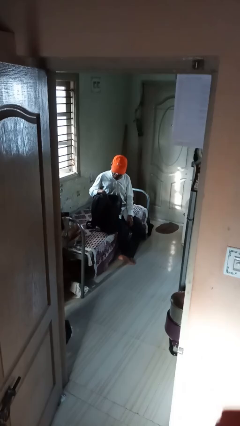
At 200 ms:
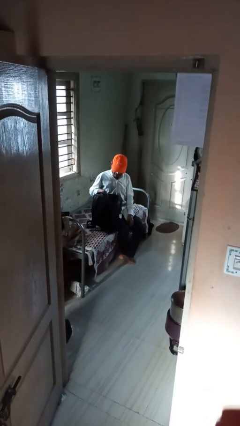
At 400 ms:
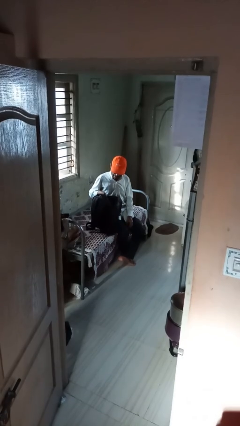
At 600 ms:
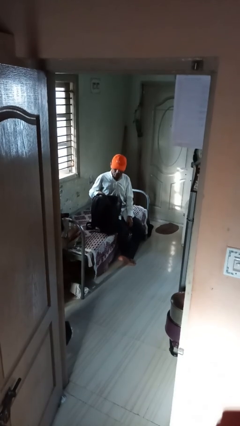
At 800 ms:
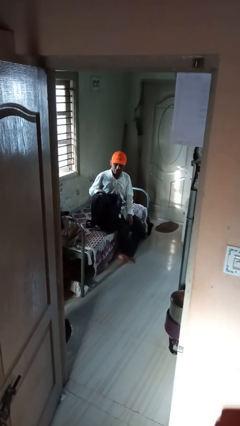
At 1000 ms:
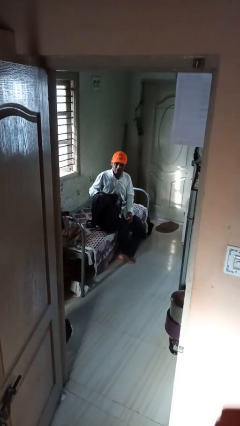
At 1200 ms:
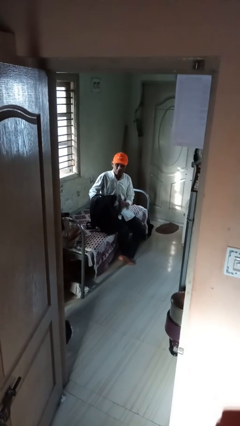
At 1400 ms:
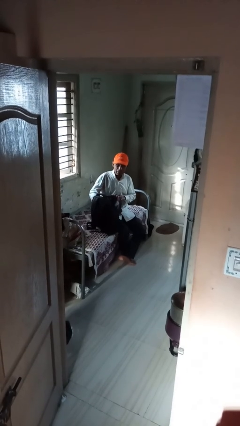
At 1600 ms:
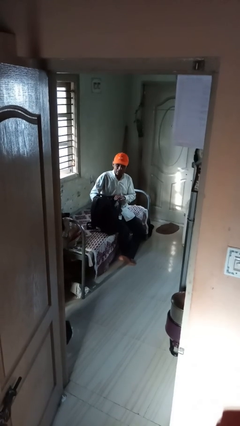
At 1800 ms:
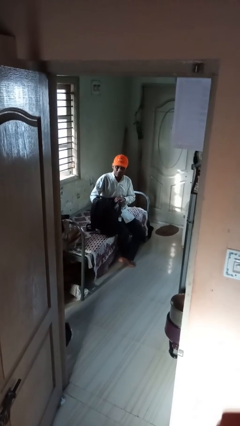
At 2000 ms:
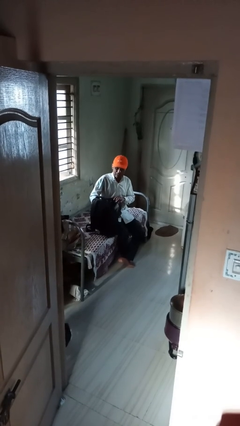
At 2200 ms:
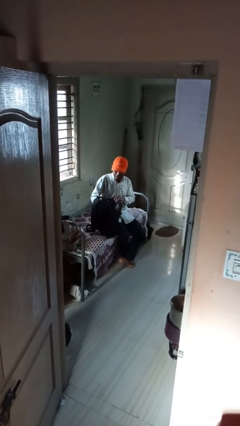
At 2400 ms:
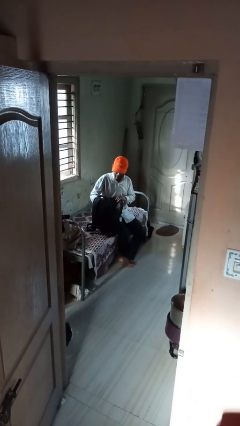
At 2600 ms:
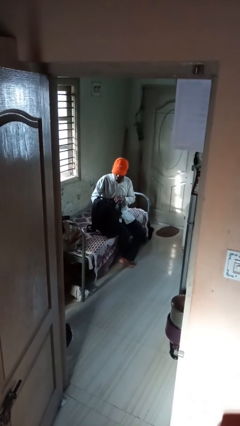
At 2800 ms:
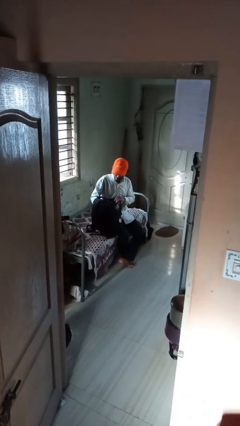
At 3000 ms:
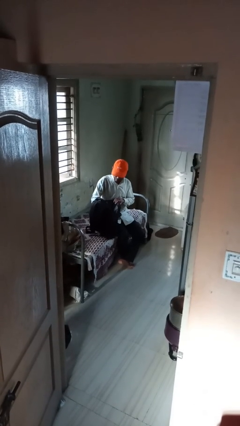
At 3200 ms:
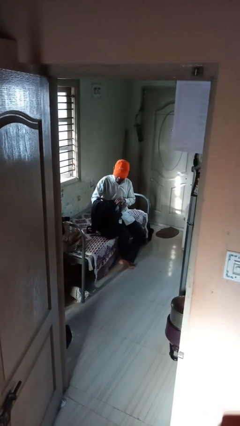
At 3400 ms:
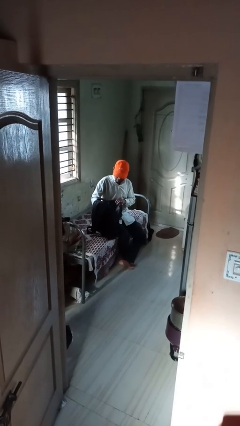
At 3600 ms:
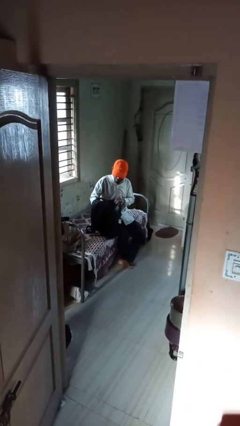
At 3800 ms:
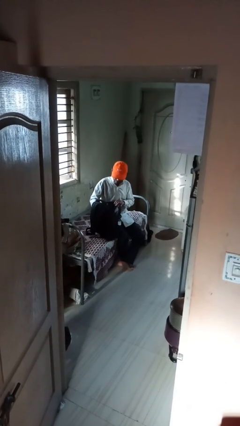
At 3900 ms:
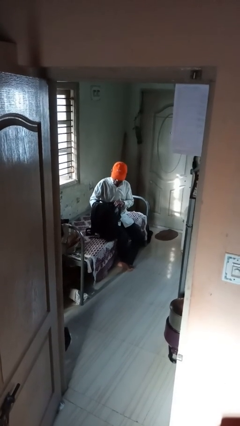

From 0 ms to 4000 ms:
person searches in backpack

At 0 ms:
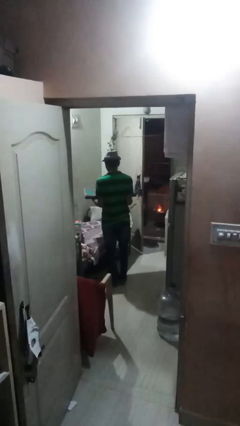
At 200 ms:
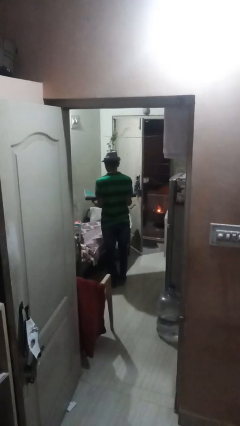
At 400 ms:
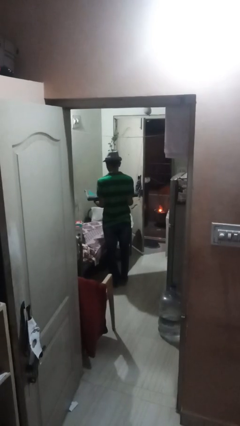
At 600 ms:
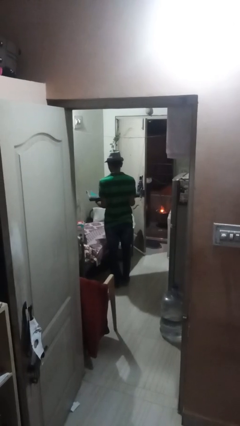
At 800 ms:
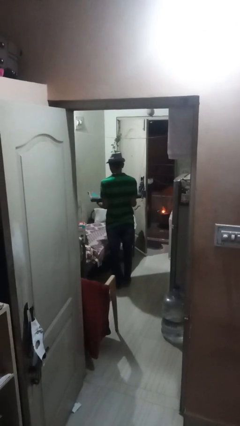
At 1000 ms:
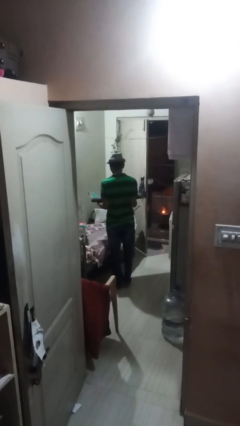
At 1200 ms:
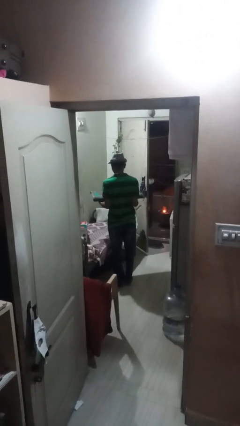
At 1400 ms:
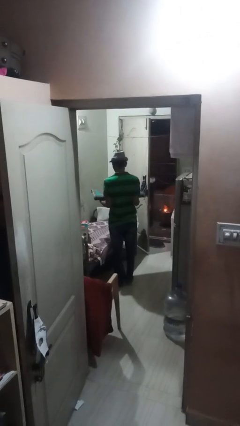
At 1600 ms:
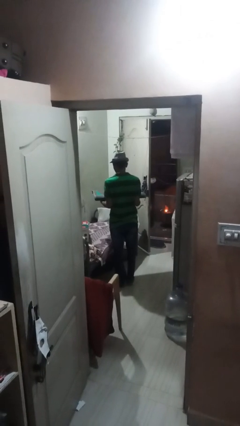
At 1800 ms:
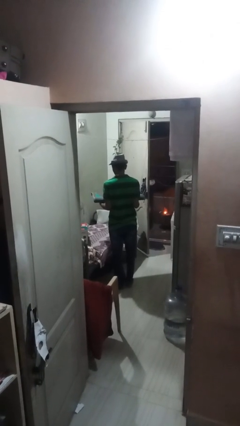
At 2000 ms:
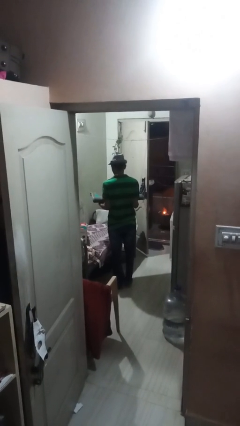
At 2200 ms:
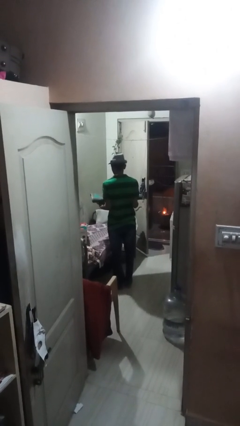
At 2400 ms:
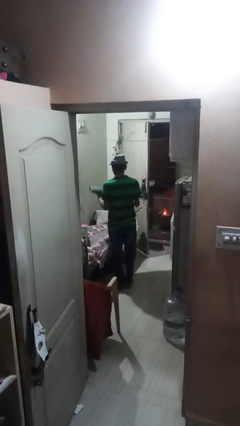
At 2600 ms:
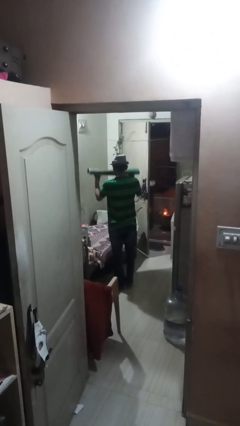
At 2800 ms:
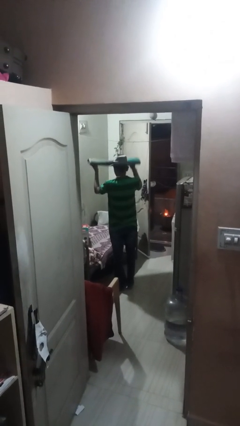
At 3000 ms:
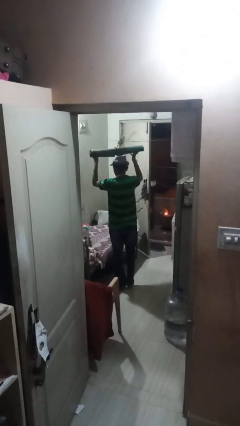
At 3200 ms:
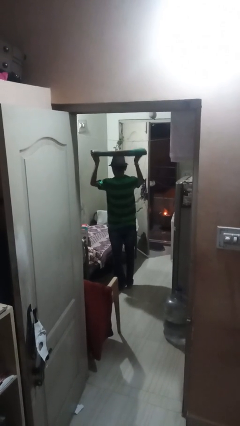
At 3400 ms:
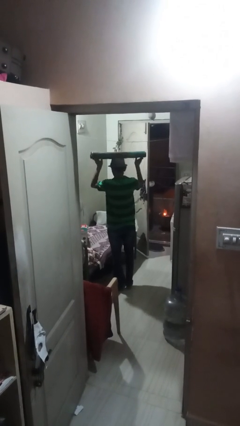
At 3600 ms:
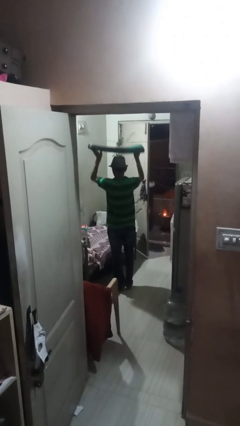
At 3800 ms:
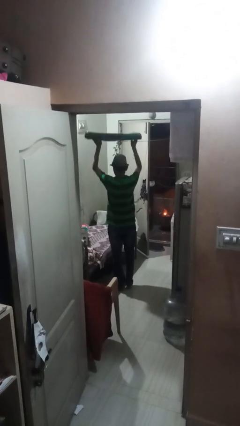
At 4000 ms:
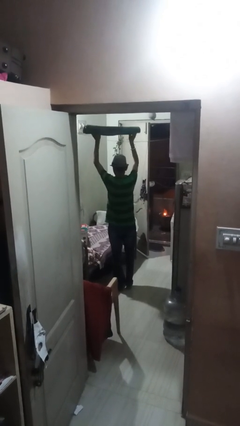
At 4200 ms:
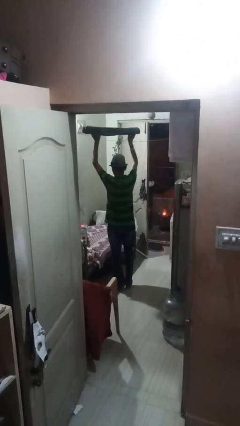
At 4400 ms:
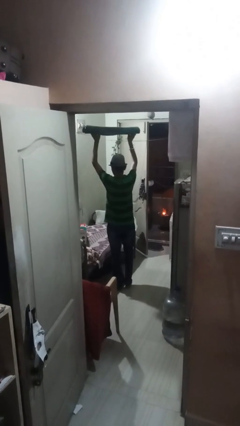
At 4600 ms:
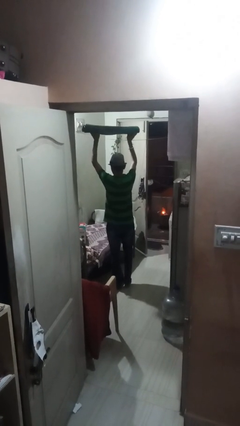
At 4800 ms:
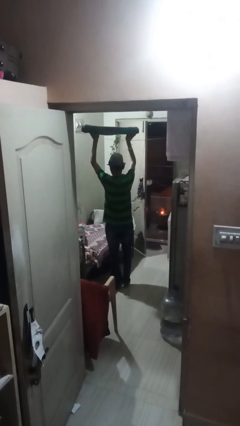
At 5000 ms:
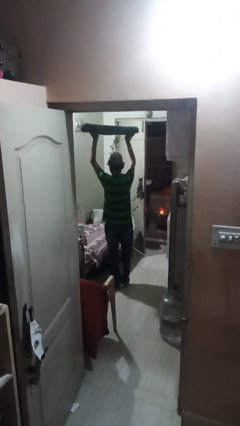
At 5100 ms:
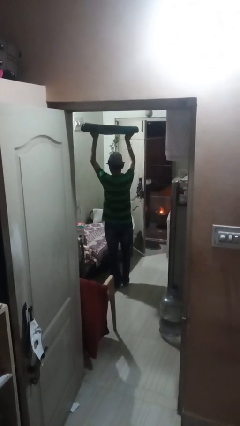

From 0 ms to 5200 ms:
person holds object above head

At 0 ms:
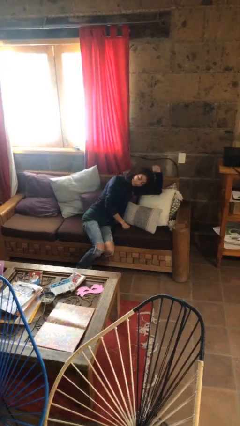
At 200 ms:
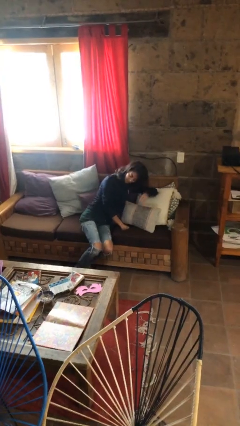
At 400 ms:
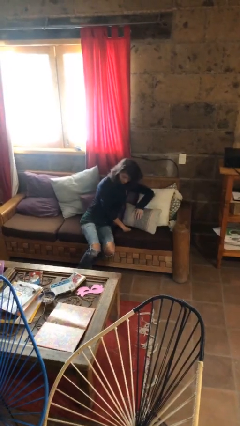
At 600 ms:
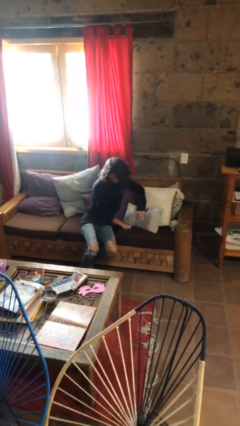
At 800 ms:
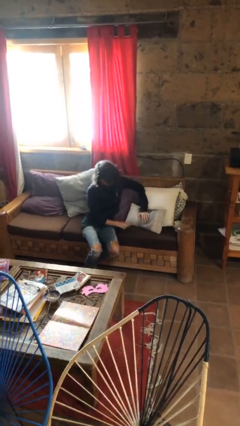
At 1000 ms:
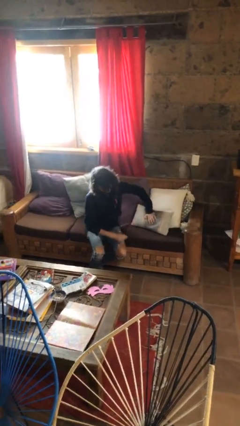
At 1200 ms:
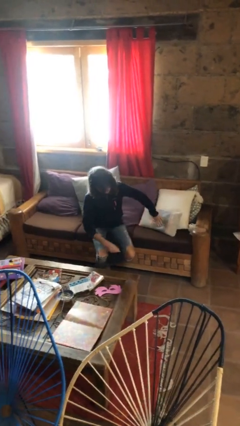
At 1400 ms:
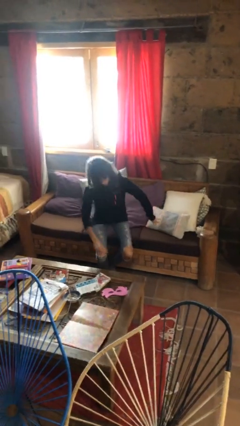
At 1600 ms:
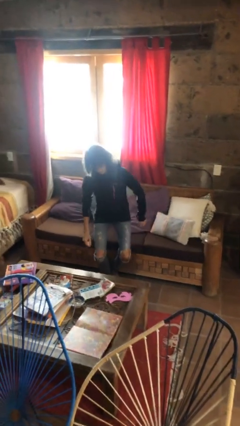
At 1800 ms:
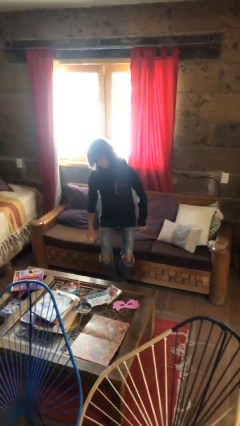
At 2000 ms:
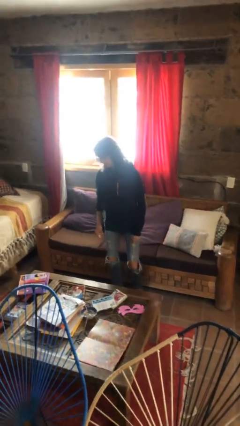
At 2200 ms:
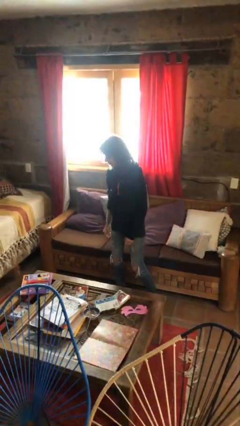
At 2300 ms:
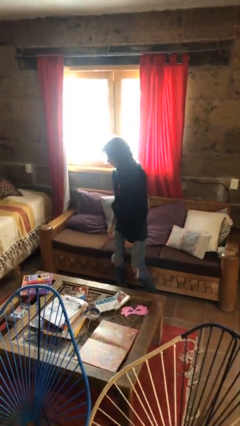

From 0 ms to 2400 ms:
person stands up

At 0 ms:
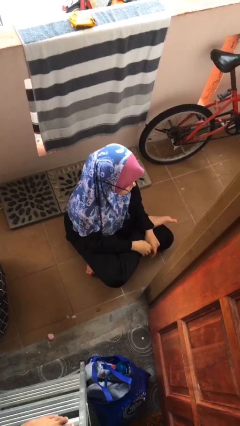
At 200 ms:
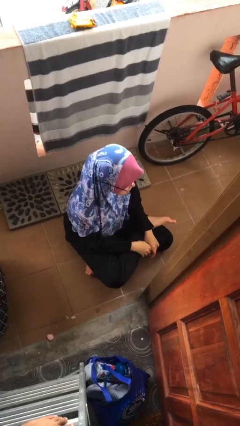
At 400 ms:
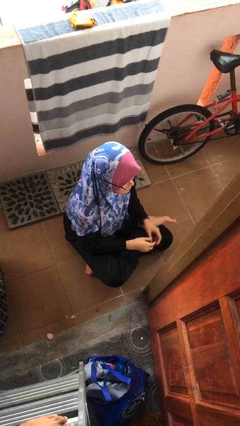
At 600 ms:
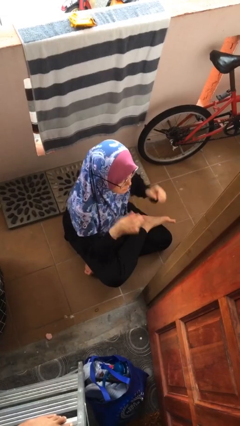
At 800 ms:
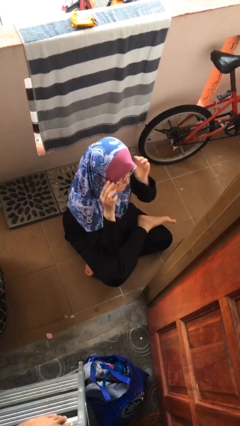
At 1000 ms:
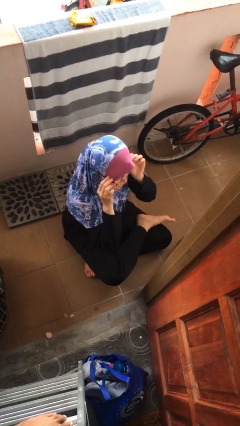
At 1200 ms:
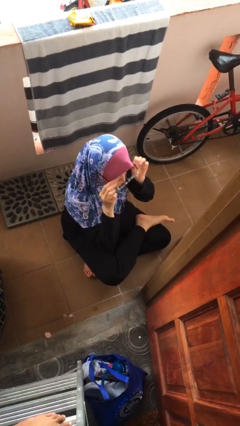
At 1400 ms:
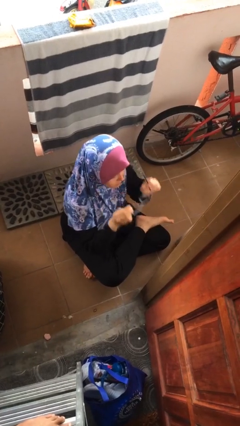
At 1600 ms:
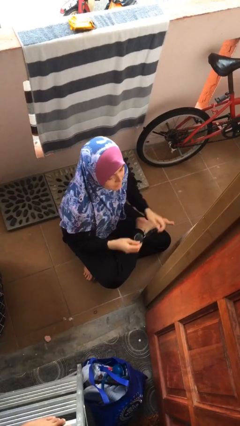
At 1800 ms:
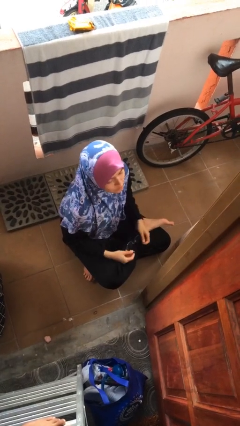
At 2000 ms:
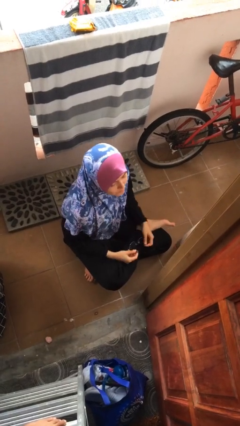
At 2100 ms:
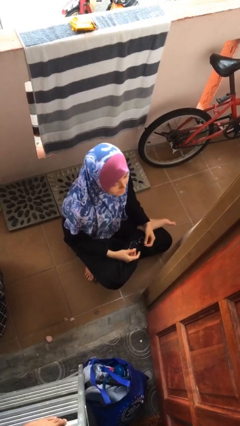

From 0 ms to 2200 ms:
person takes off glasses

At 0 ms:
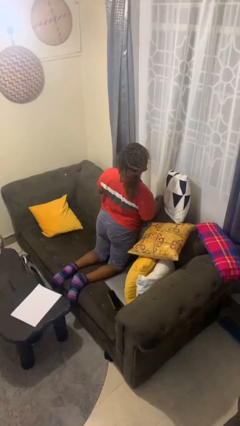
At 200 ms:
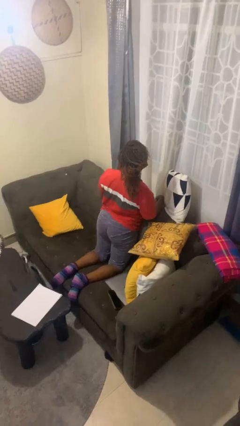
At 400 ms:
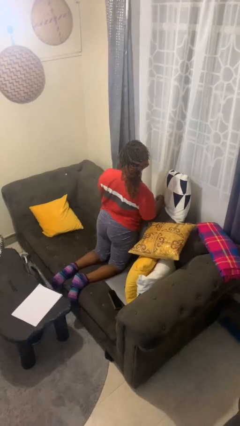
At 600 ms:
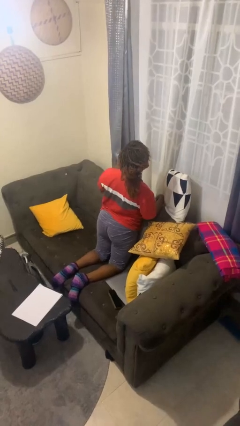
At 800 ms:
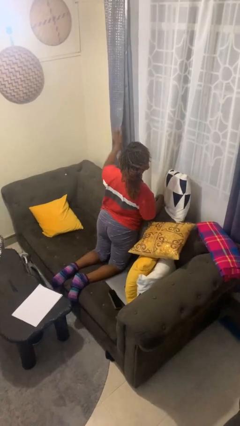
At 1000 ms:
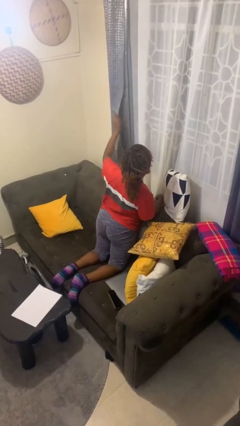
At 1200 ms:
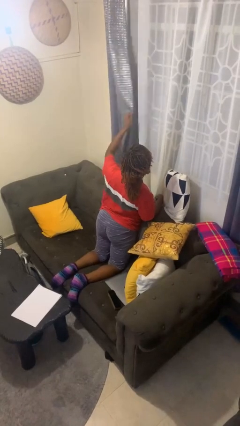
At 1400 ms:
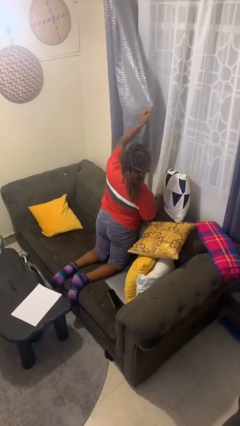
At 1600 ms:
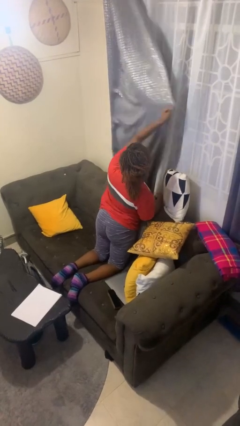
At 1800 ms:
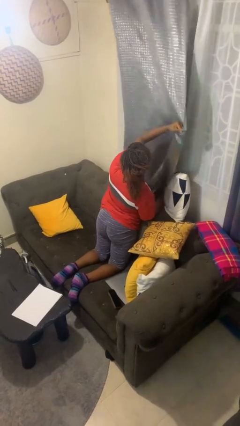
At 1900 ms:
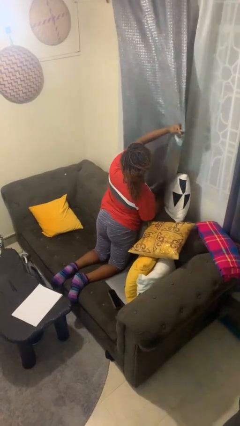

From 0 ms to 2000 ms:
person closes curtains

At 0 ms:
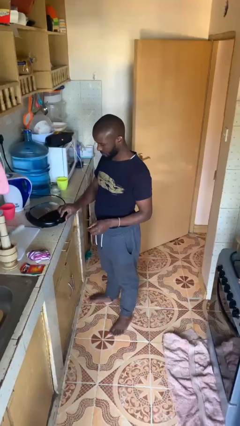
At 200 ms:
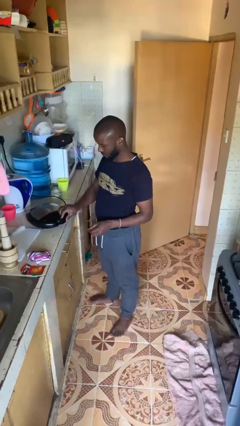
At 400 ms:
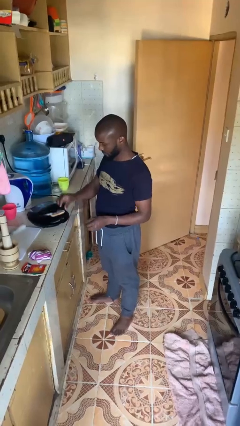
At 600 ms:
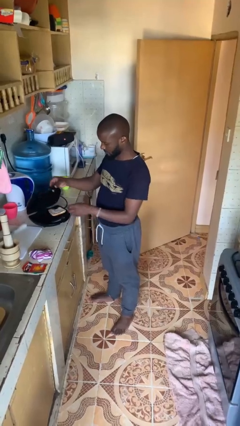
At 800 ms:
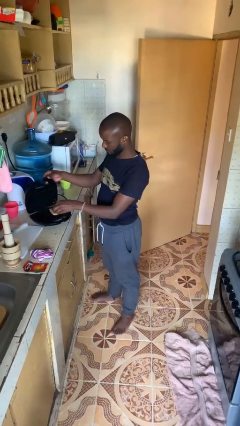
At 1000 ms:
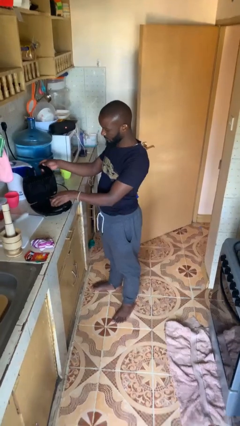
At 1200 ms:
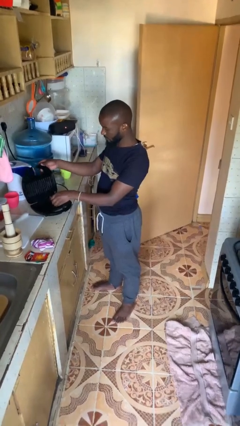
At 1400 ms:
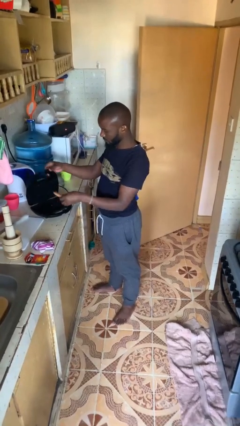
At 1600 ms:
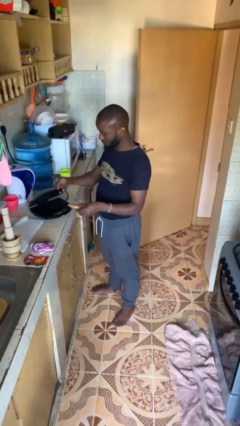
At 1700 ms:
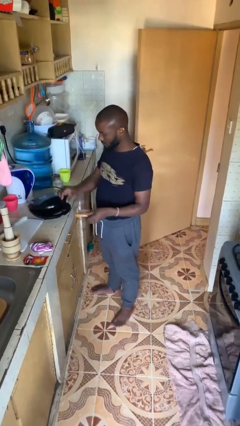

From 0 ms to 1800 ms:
person takes object from toaster
